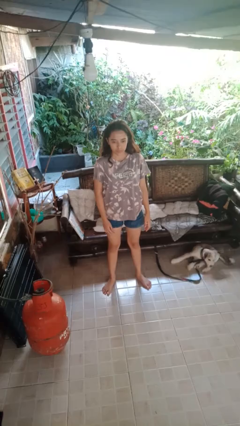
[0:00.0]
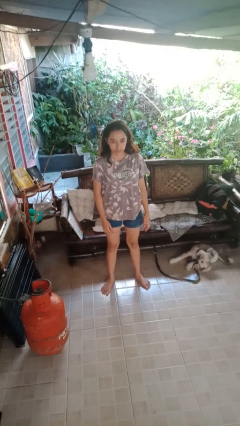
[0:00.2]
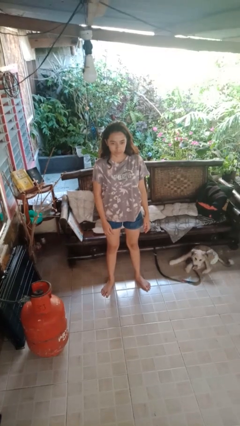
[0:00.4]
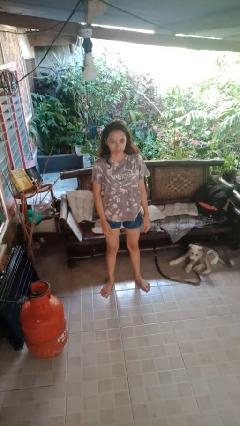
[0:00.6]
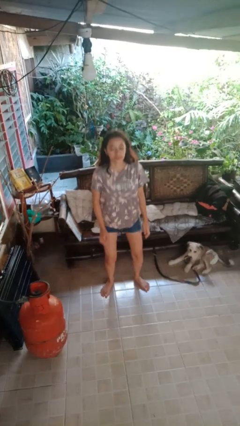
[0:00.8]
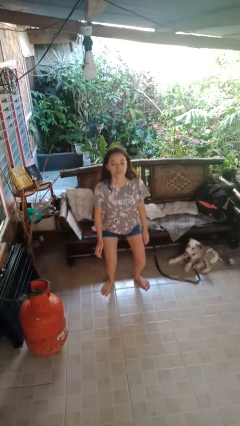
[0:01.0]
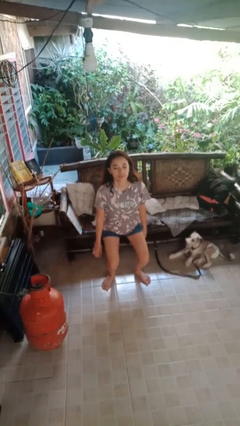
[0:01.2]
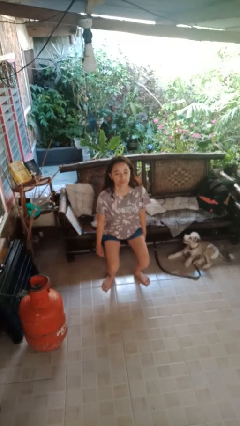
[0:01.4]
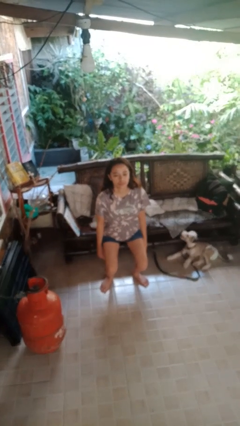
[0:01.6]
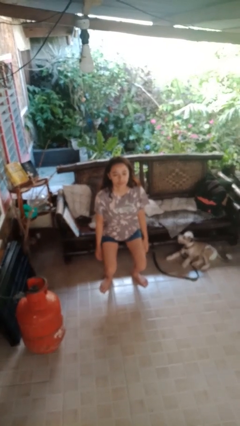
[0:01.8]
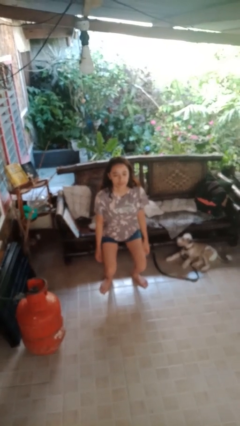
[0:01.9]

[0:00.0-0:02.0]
person squats

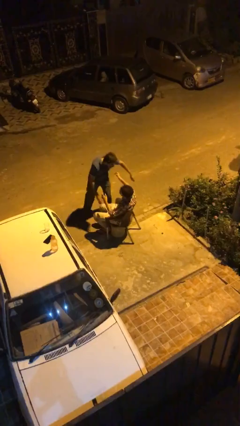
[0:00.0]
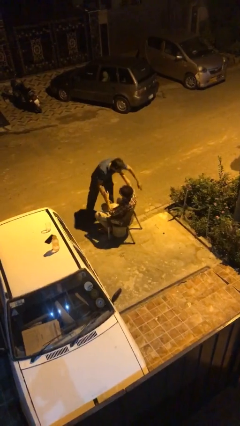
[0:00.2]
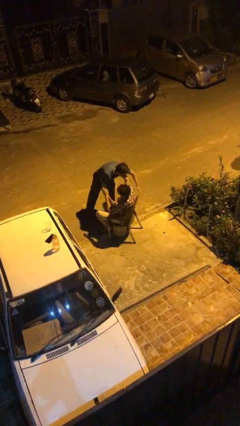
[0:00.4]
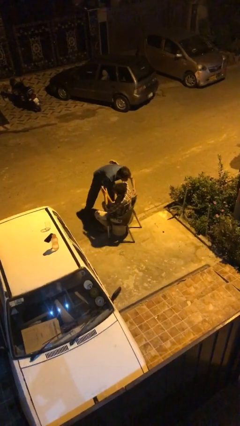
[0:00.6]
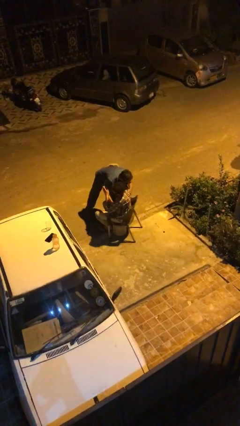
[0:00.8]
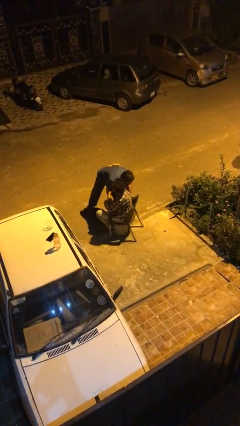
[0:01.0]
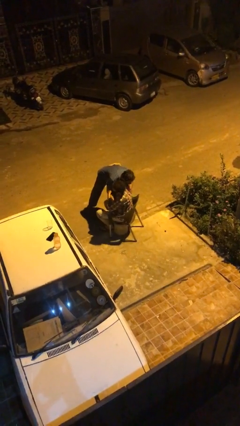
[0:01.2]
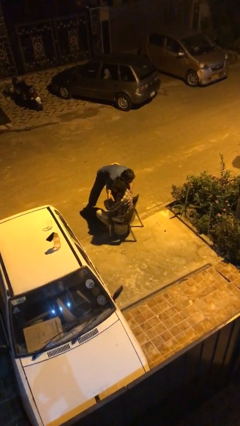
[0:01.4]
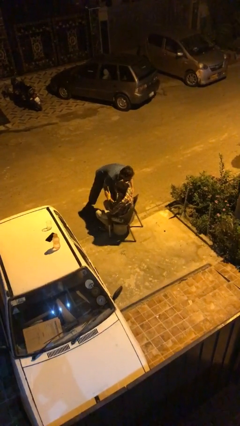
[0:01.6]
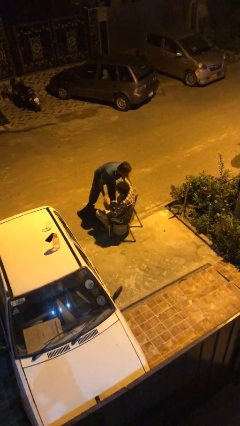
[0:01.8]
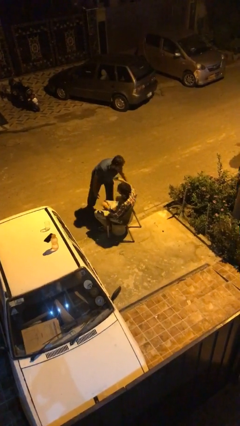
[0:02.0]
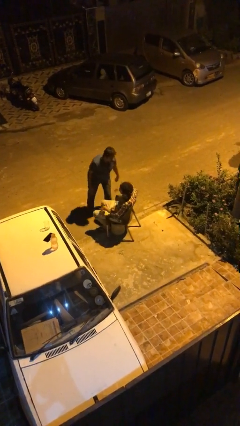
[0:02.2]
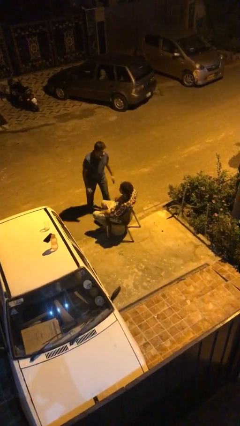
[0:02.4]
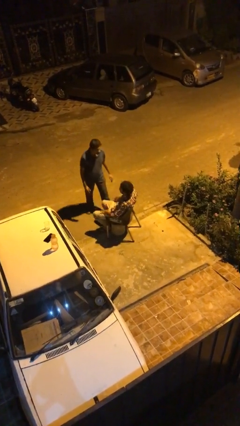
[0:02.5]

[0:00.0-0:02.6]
person embraces person

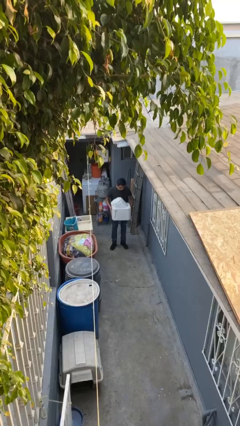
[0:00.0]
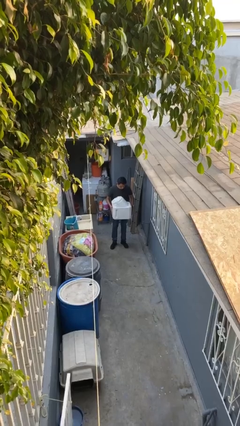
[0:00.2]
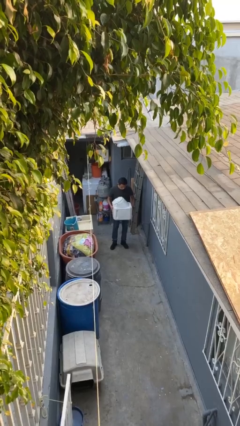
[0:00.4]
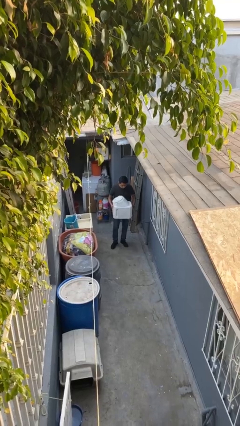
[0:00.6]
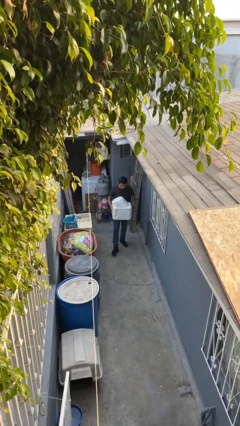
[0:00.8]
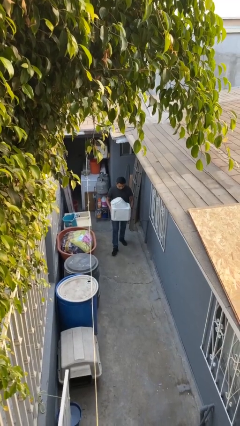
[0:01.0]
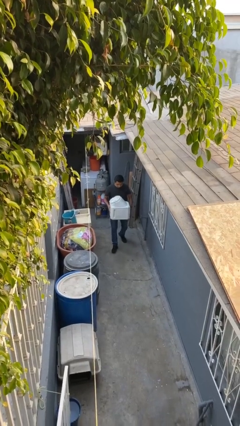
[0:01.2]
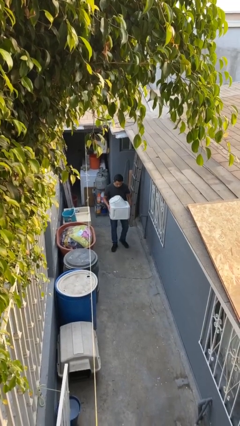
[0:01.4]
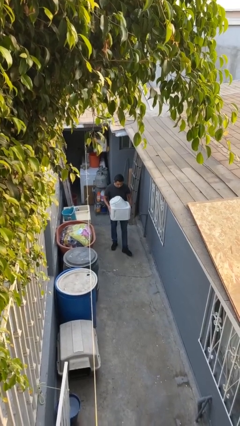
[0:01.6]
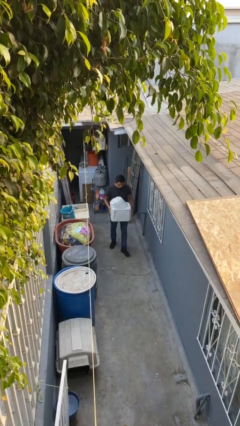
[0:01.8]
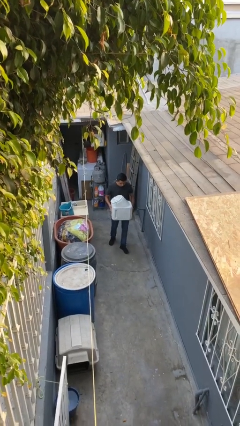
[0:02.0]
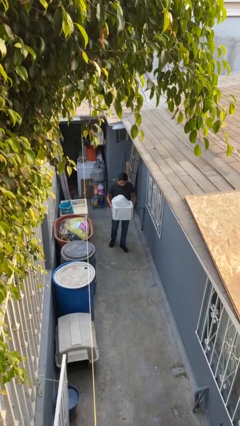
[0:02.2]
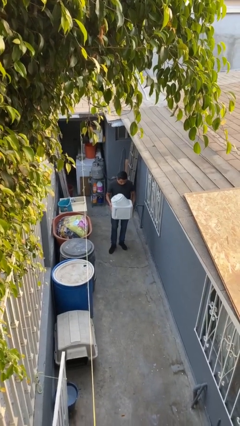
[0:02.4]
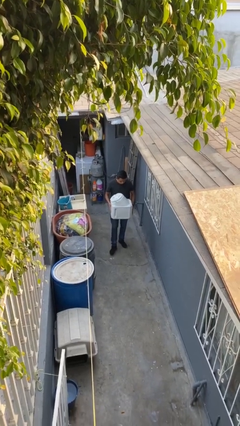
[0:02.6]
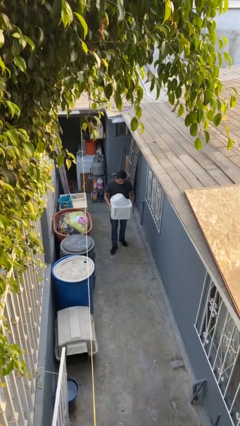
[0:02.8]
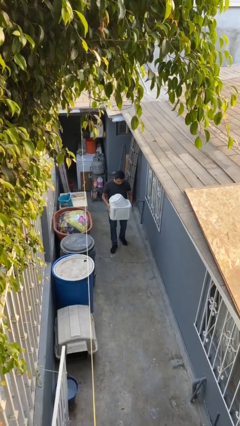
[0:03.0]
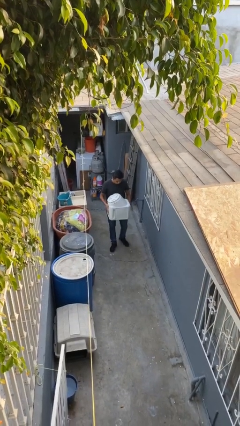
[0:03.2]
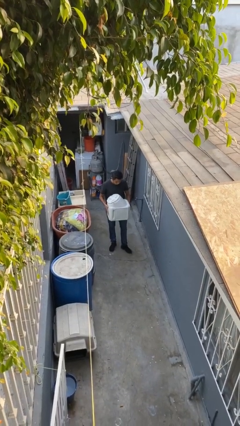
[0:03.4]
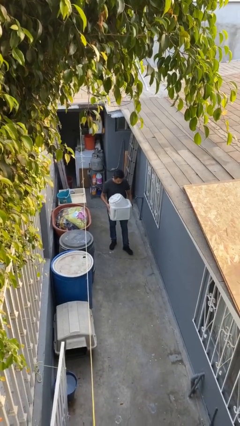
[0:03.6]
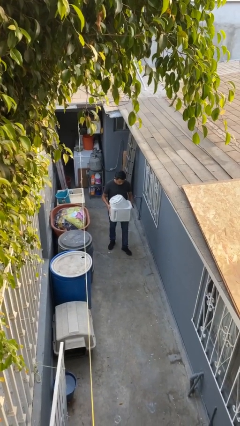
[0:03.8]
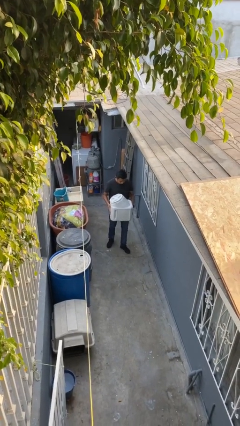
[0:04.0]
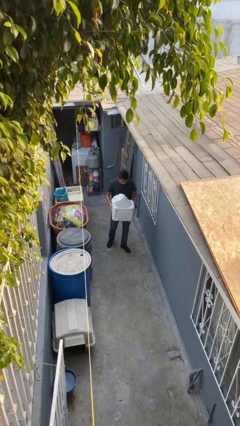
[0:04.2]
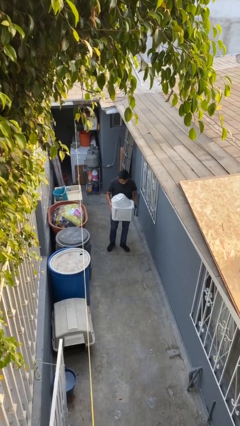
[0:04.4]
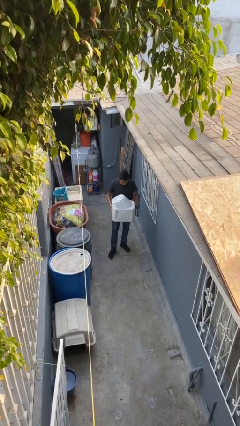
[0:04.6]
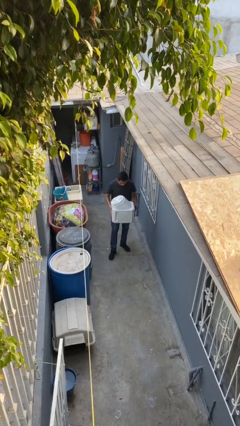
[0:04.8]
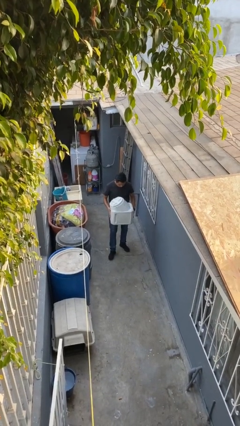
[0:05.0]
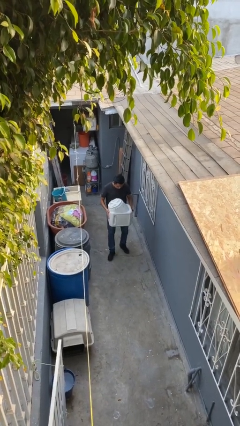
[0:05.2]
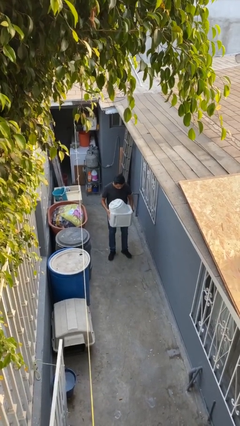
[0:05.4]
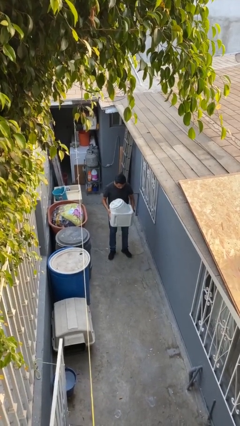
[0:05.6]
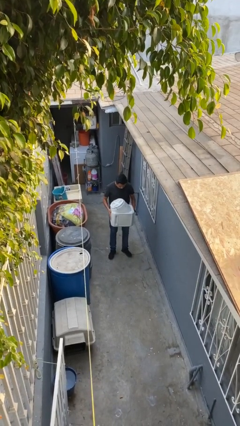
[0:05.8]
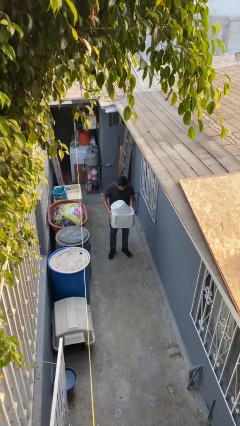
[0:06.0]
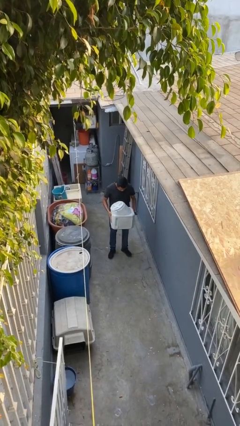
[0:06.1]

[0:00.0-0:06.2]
person carries heavy object

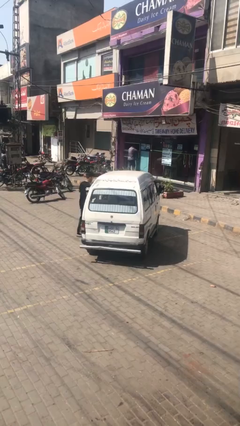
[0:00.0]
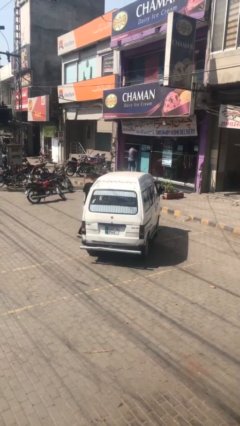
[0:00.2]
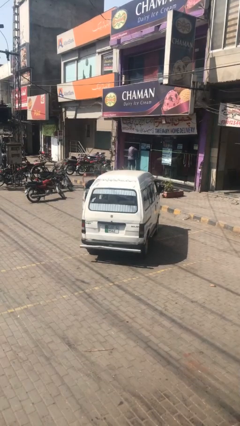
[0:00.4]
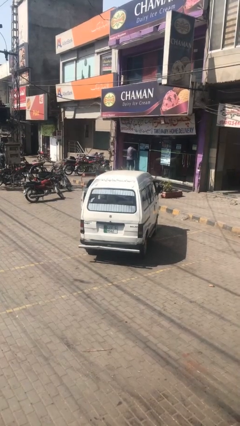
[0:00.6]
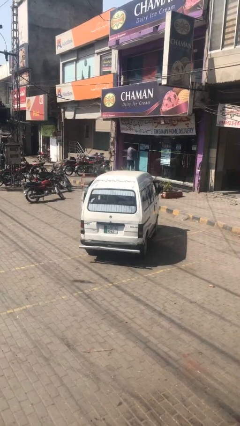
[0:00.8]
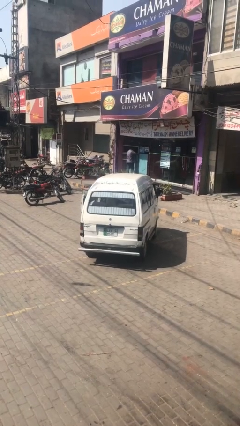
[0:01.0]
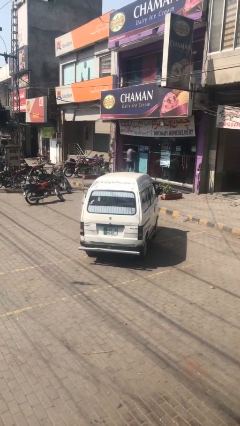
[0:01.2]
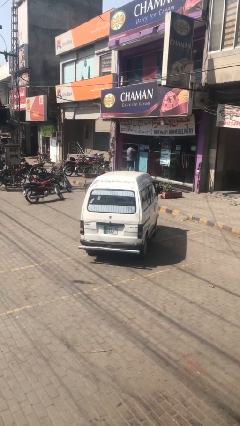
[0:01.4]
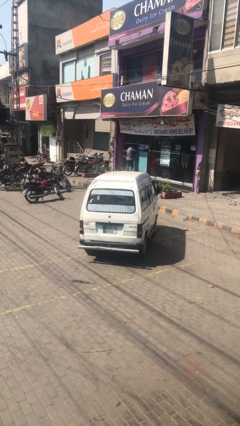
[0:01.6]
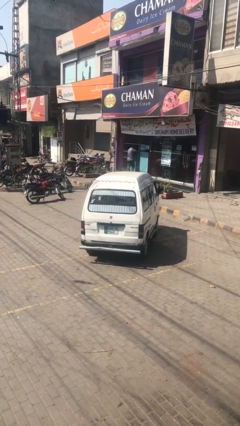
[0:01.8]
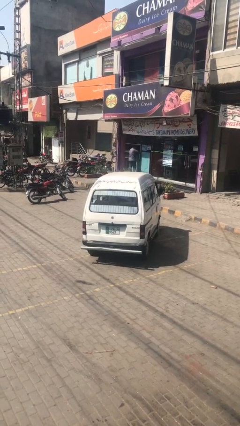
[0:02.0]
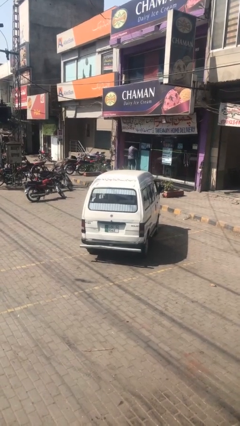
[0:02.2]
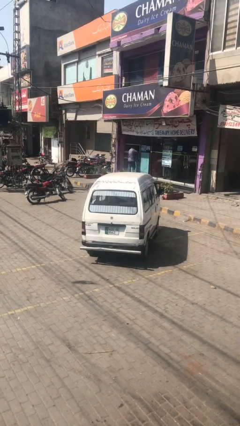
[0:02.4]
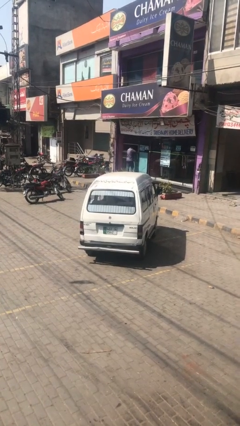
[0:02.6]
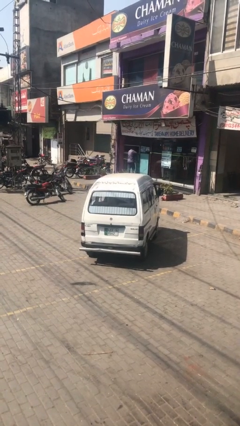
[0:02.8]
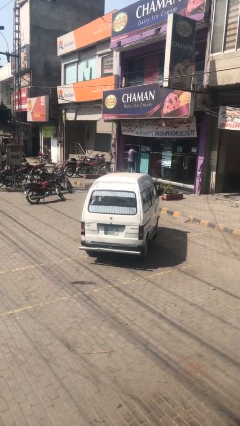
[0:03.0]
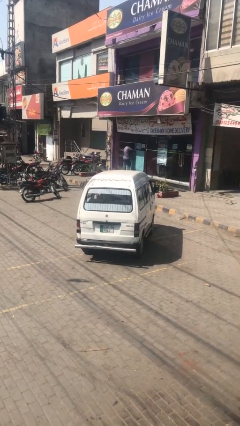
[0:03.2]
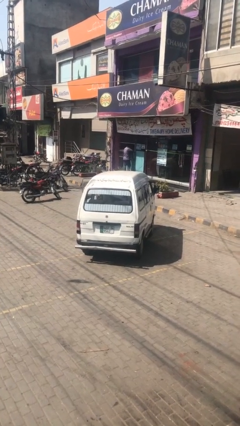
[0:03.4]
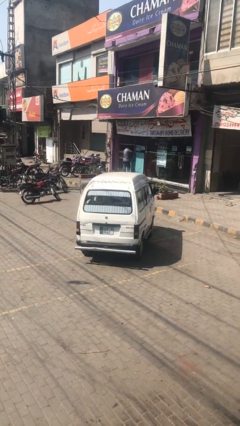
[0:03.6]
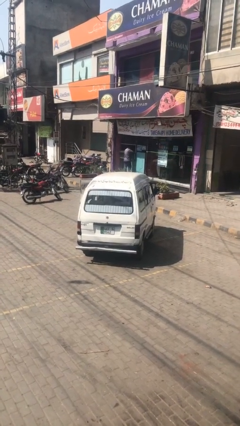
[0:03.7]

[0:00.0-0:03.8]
car picks up person

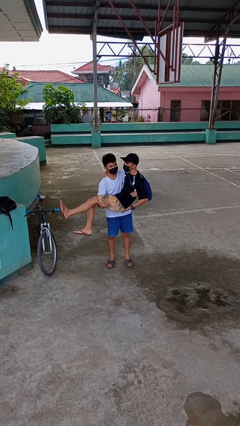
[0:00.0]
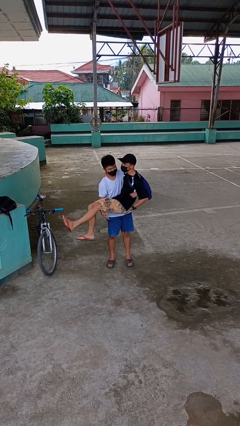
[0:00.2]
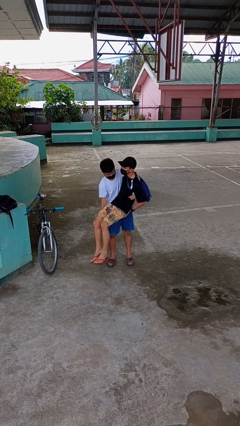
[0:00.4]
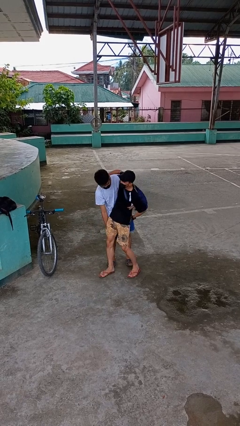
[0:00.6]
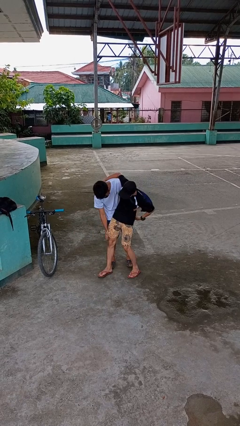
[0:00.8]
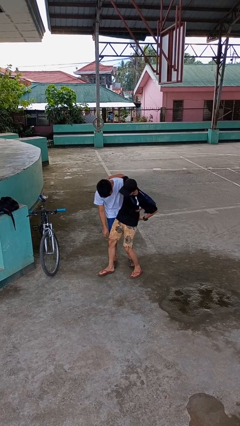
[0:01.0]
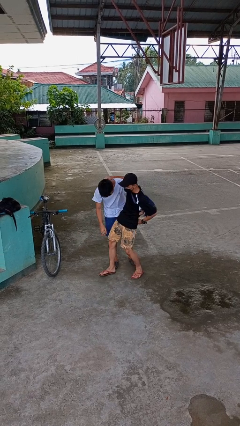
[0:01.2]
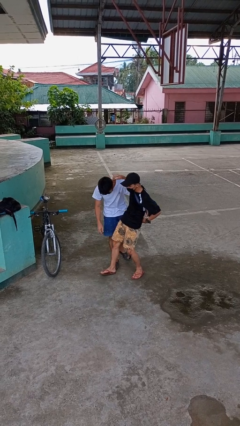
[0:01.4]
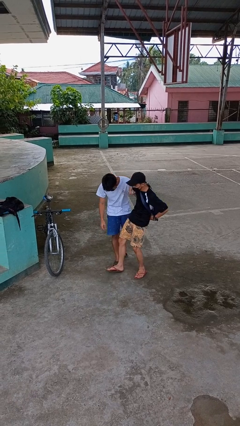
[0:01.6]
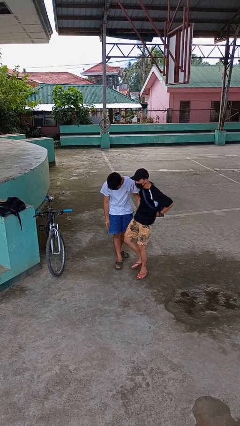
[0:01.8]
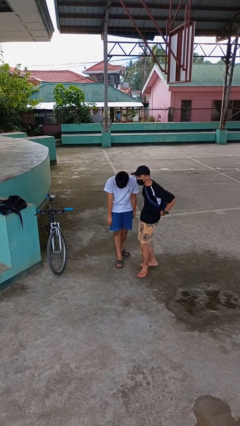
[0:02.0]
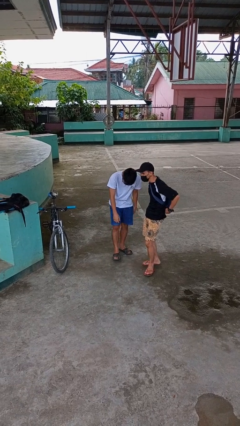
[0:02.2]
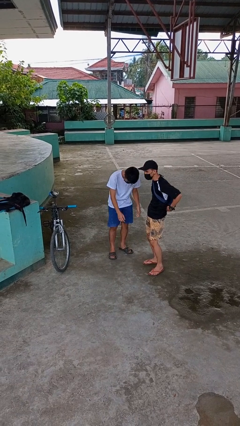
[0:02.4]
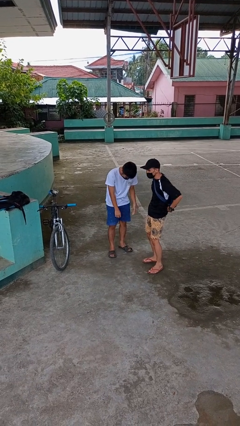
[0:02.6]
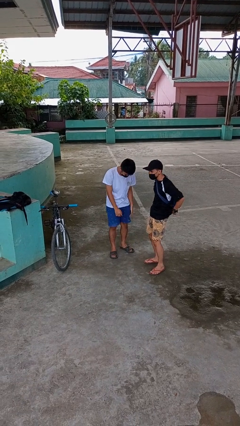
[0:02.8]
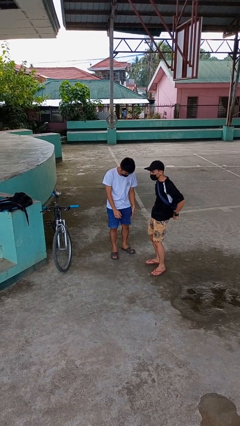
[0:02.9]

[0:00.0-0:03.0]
person puts down person

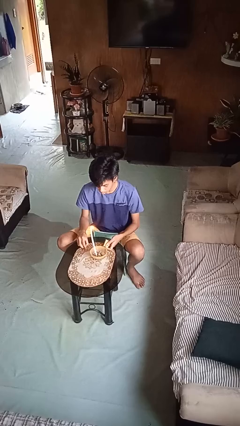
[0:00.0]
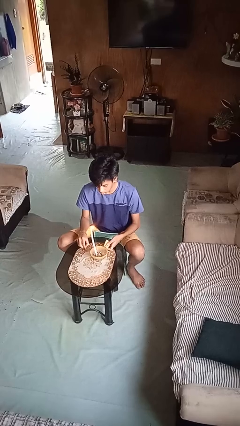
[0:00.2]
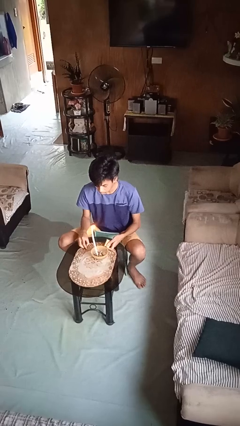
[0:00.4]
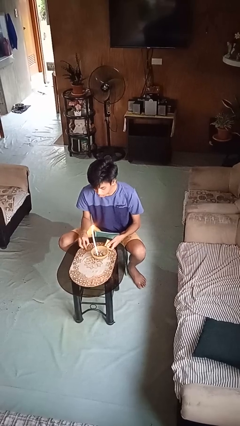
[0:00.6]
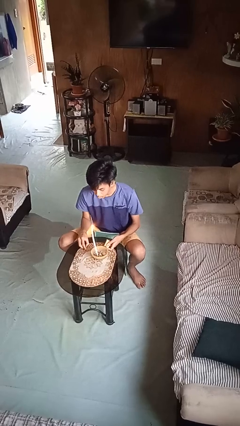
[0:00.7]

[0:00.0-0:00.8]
person extinguishes candle
